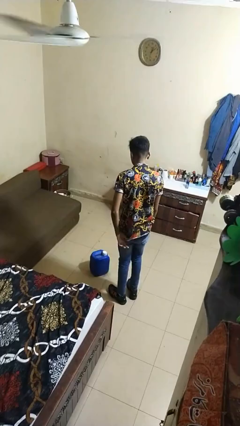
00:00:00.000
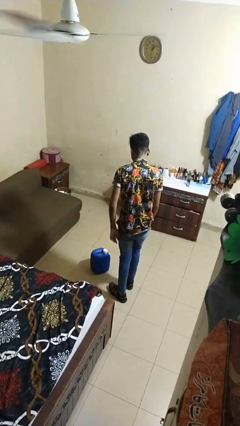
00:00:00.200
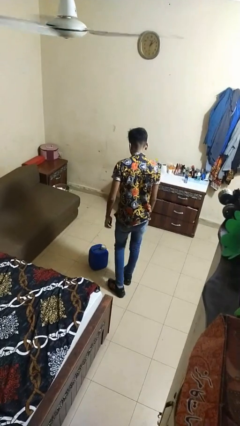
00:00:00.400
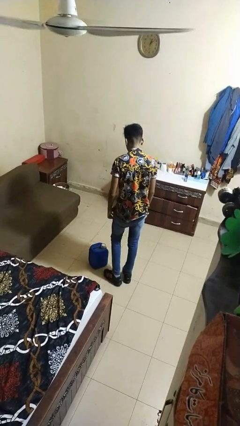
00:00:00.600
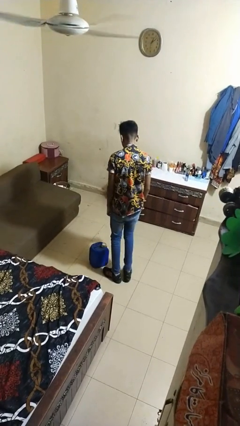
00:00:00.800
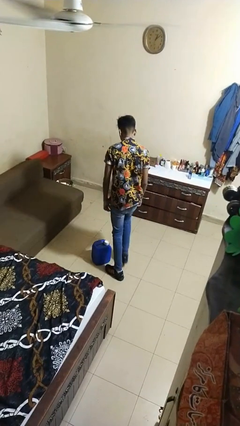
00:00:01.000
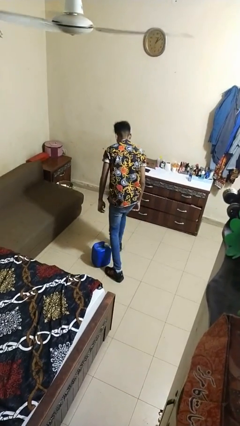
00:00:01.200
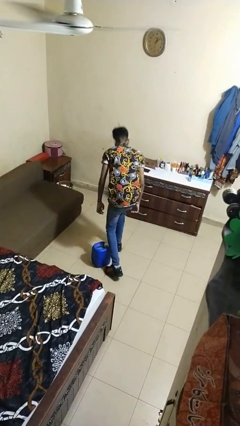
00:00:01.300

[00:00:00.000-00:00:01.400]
person trips on object on floor

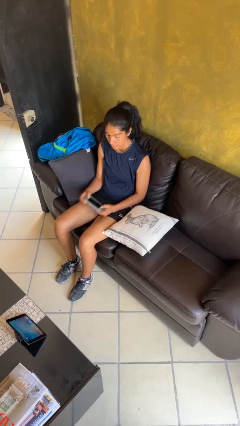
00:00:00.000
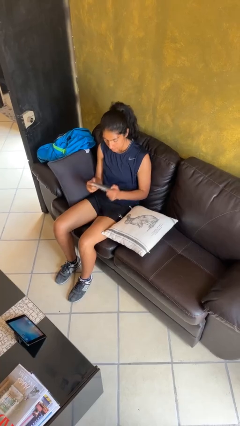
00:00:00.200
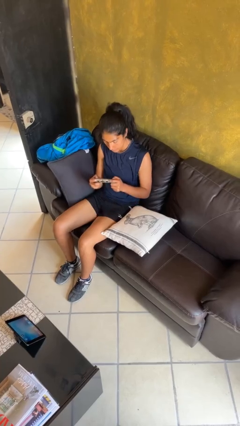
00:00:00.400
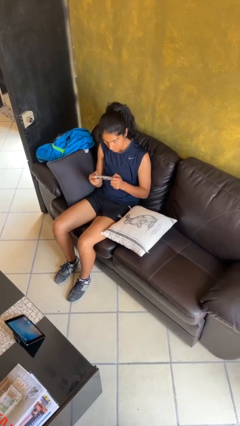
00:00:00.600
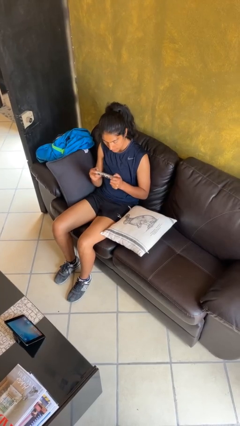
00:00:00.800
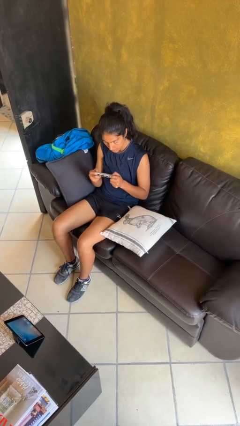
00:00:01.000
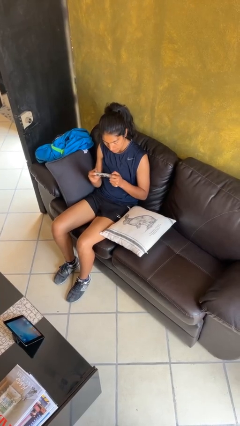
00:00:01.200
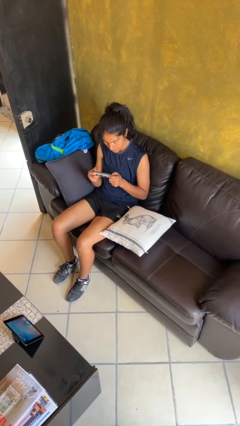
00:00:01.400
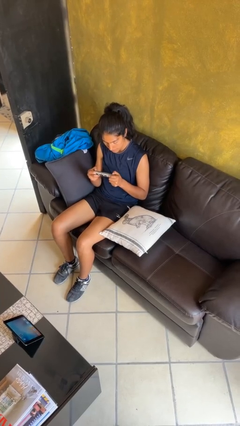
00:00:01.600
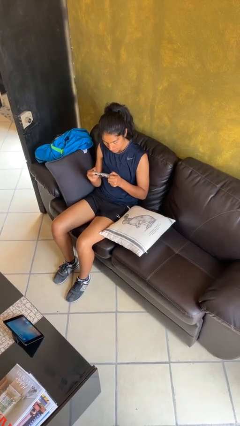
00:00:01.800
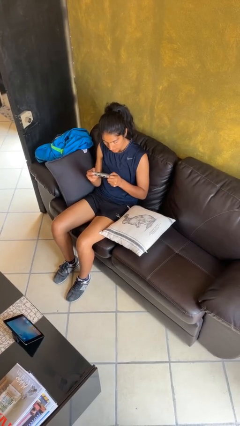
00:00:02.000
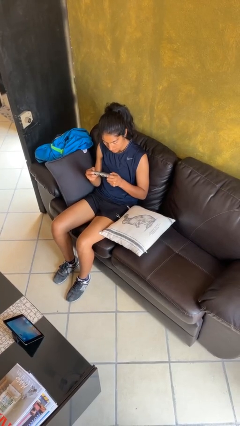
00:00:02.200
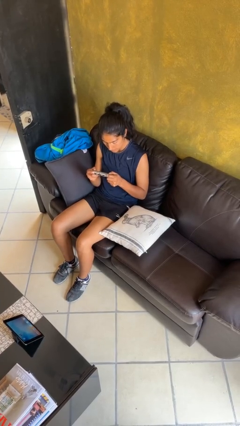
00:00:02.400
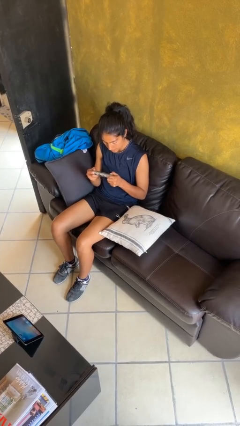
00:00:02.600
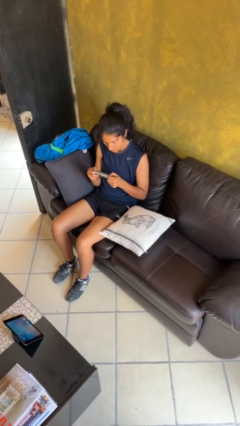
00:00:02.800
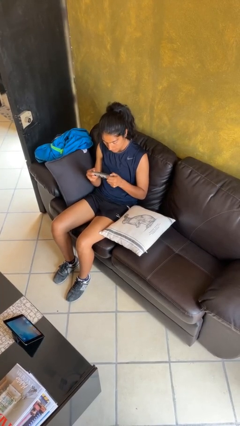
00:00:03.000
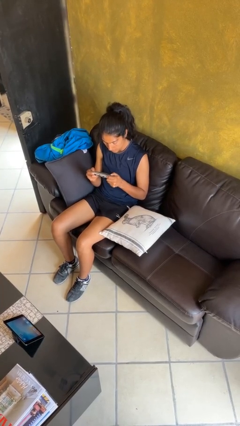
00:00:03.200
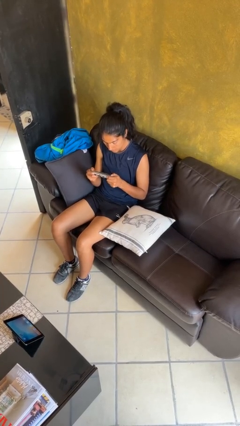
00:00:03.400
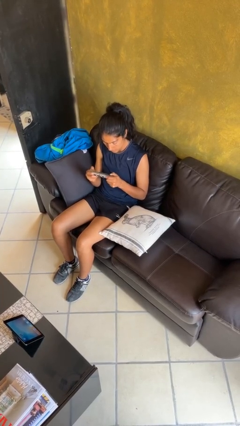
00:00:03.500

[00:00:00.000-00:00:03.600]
person interacts with handheld game

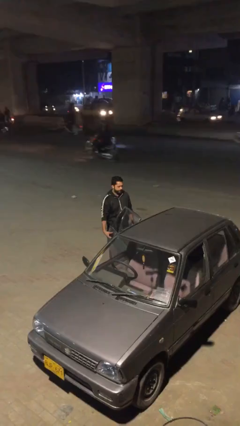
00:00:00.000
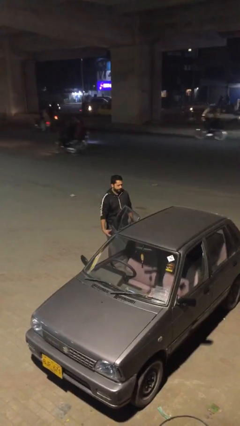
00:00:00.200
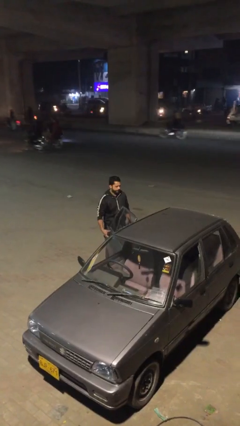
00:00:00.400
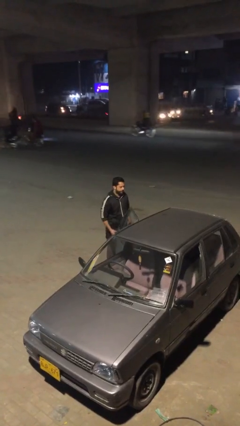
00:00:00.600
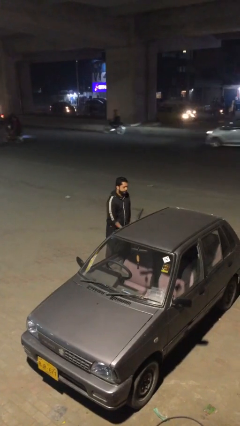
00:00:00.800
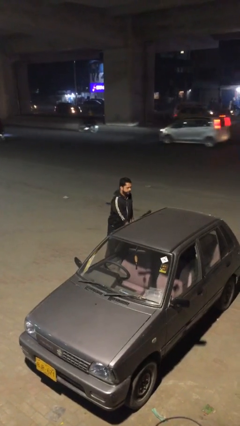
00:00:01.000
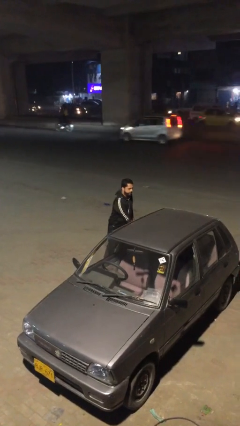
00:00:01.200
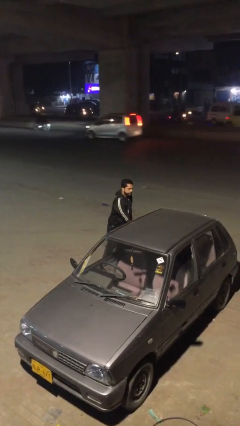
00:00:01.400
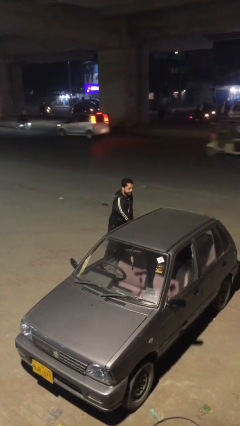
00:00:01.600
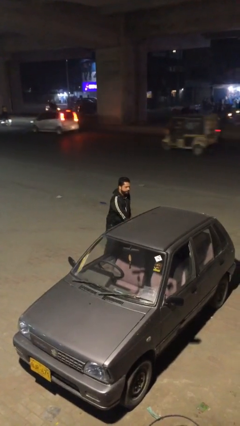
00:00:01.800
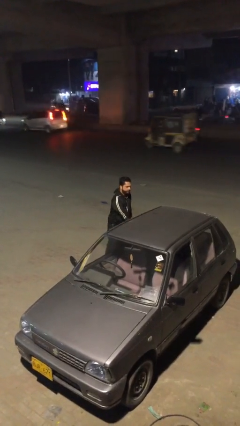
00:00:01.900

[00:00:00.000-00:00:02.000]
person closes car door

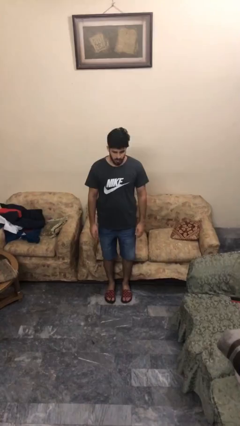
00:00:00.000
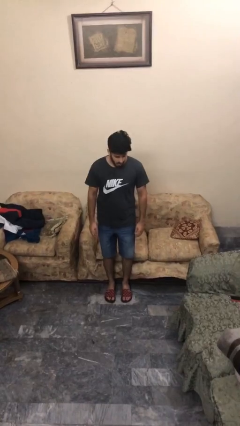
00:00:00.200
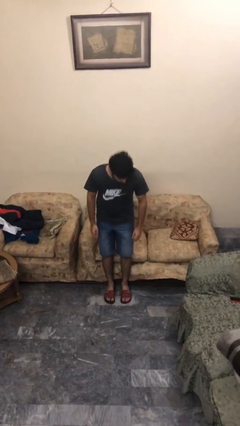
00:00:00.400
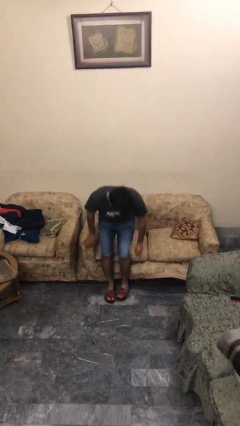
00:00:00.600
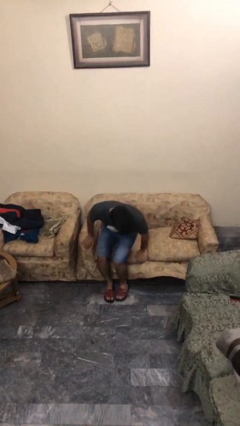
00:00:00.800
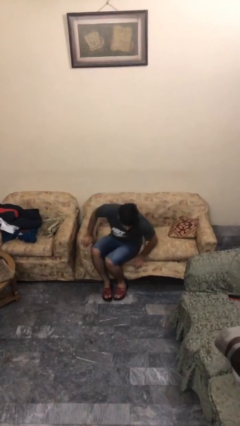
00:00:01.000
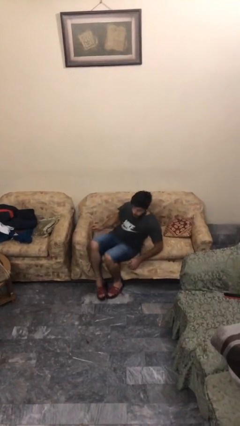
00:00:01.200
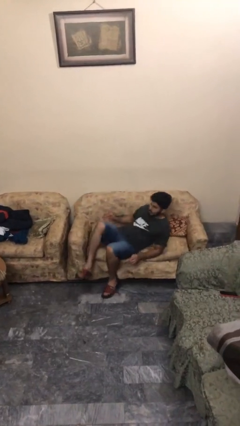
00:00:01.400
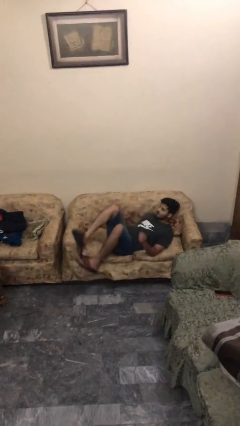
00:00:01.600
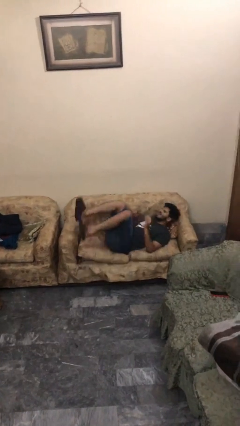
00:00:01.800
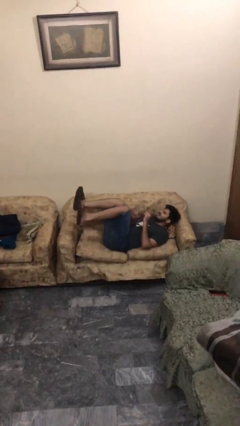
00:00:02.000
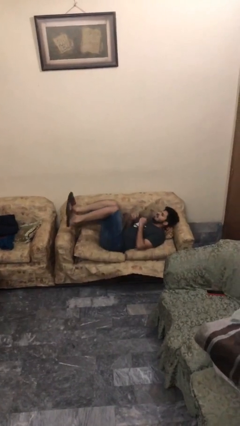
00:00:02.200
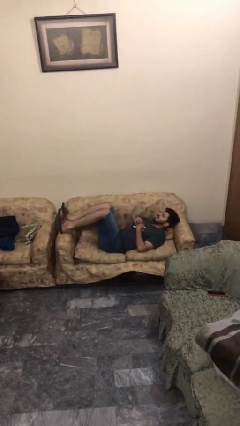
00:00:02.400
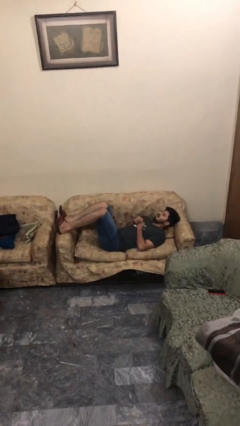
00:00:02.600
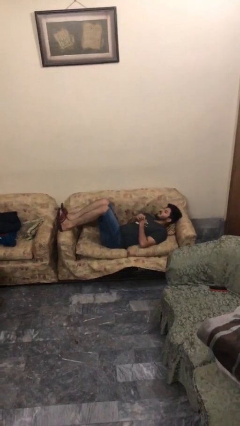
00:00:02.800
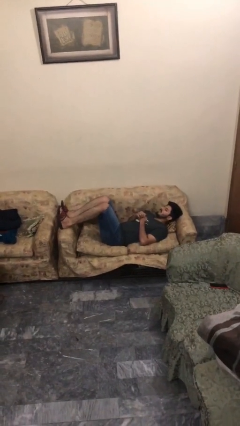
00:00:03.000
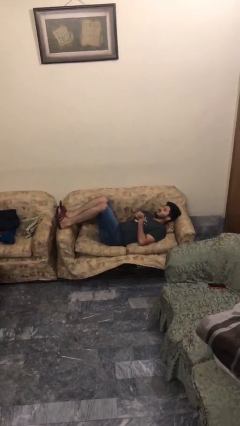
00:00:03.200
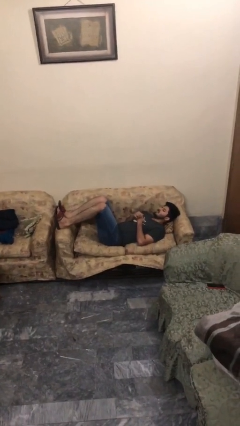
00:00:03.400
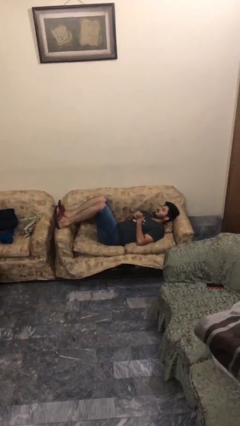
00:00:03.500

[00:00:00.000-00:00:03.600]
person lies down on couch

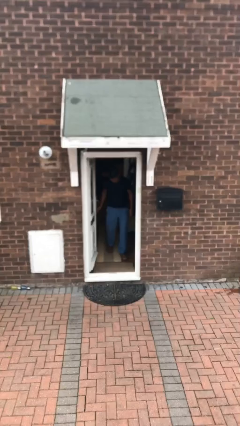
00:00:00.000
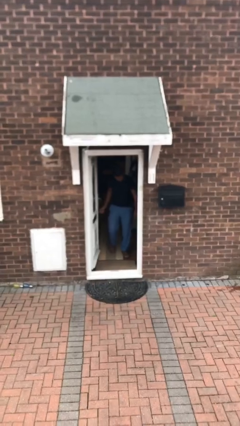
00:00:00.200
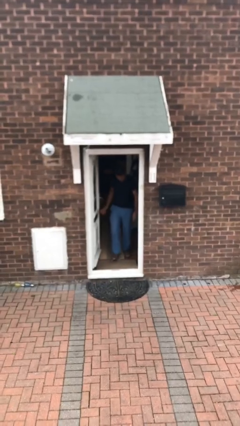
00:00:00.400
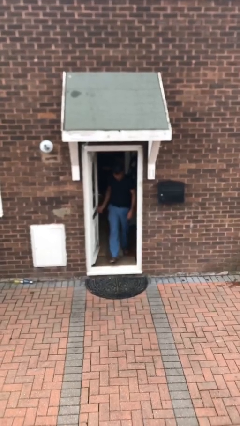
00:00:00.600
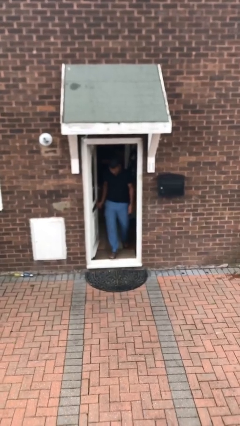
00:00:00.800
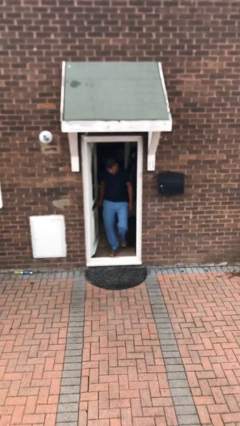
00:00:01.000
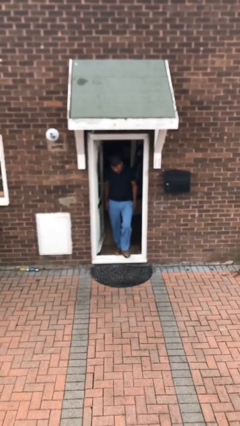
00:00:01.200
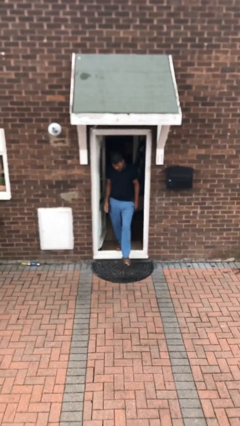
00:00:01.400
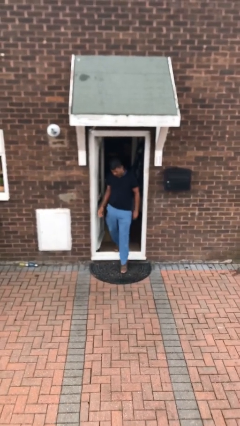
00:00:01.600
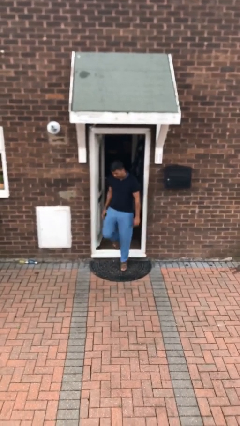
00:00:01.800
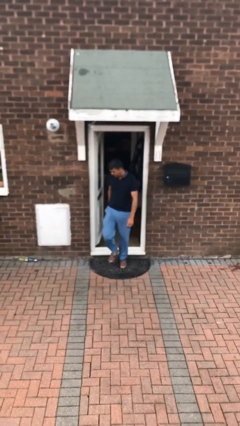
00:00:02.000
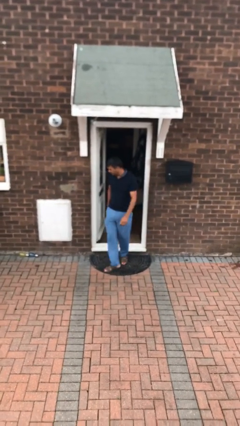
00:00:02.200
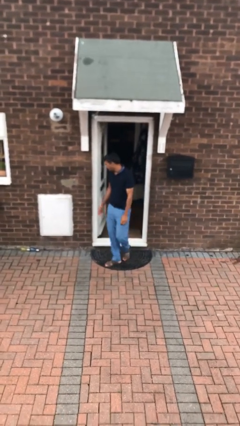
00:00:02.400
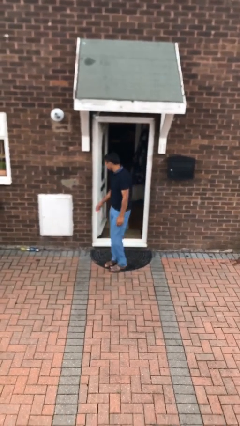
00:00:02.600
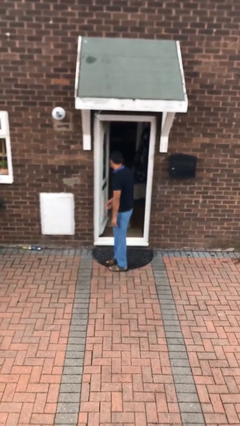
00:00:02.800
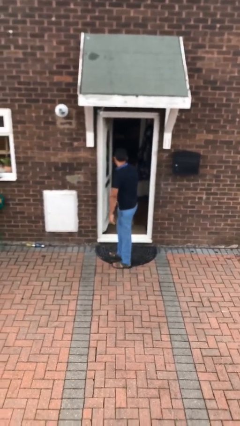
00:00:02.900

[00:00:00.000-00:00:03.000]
person enters scene through structure

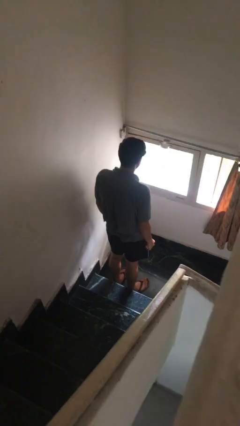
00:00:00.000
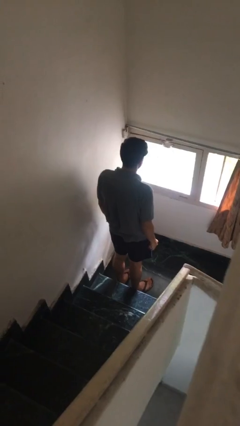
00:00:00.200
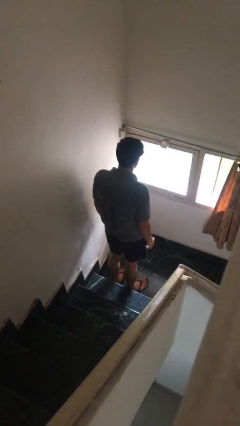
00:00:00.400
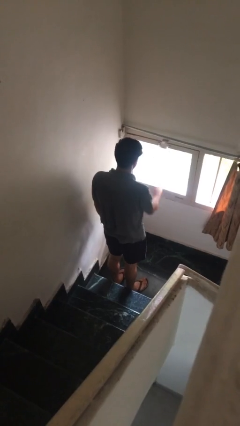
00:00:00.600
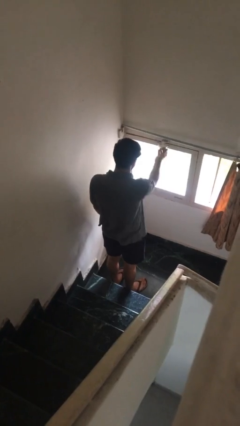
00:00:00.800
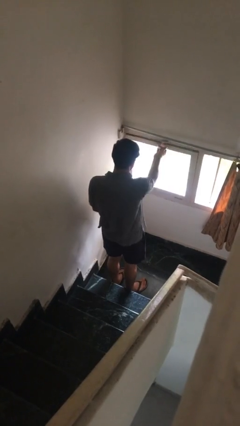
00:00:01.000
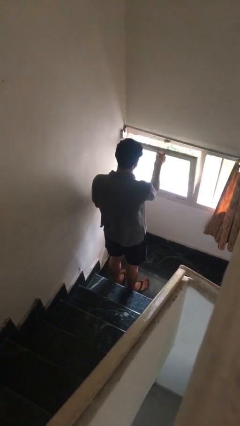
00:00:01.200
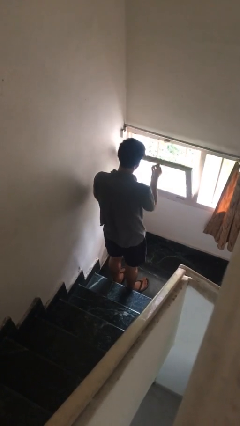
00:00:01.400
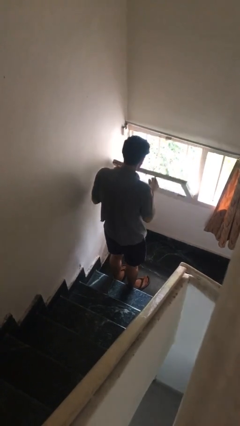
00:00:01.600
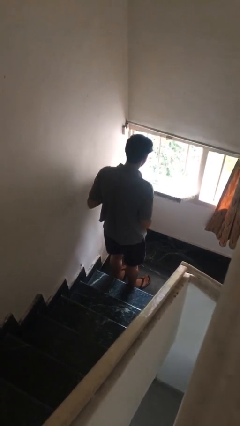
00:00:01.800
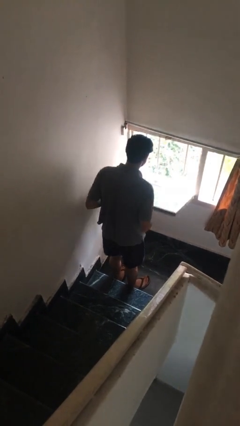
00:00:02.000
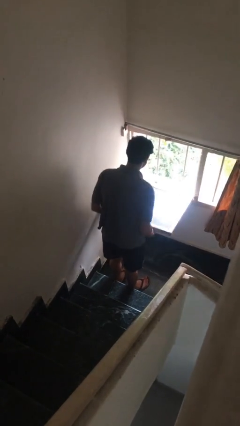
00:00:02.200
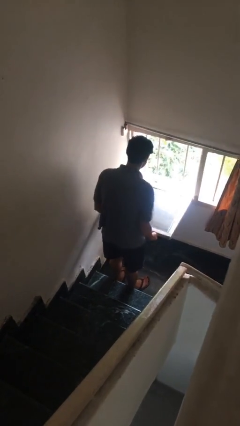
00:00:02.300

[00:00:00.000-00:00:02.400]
person opens home window

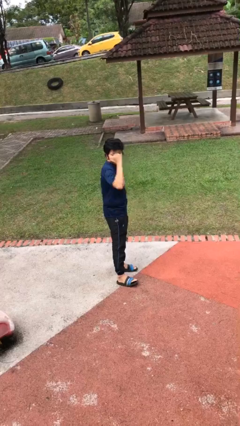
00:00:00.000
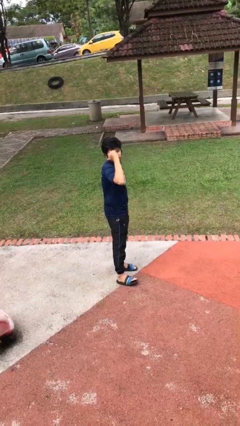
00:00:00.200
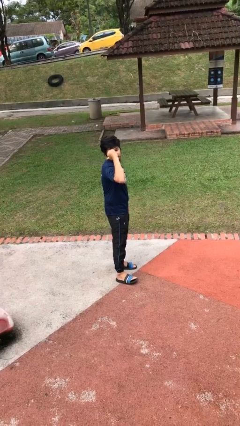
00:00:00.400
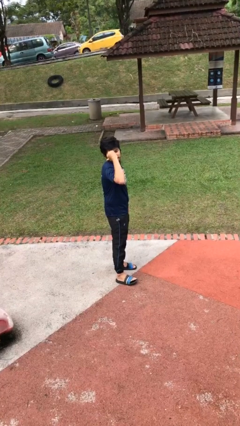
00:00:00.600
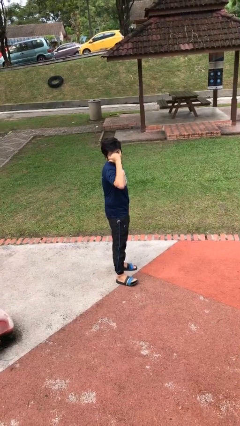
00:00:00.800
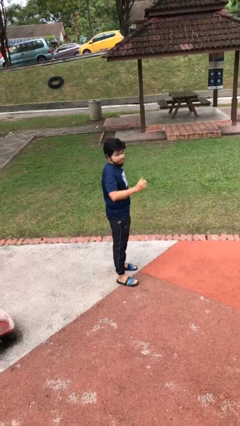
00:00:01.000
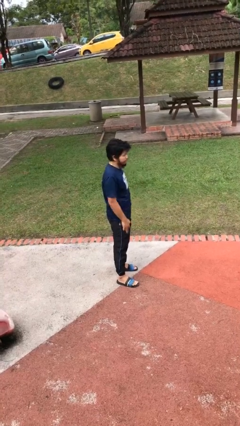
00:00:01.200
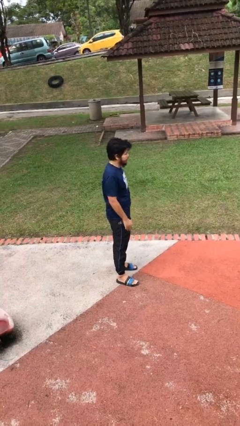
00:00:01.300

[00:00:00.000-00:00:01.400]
person gestures behind me
